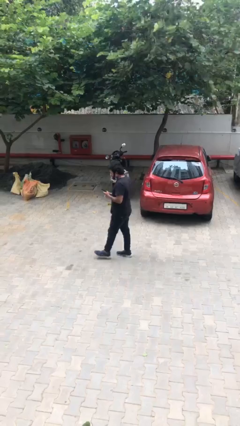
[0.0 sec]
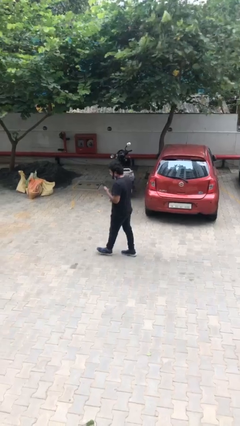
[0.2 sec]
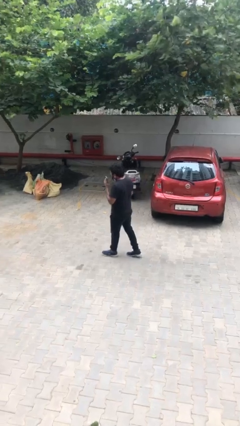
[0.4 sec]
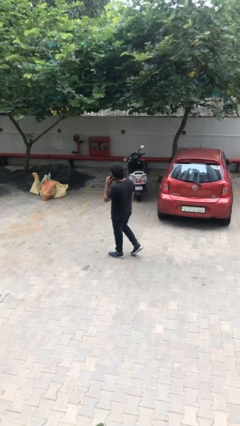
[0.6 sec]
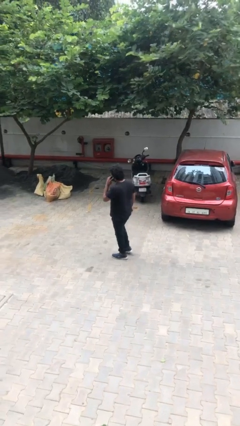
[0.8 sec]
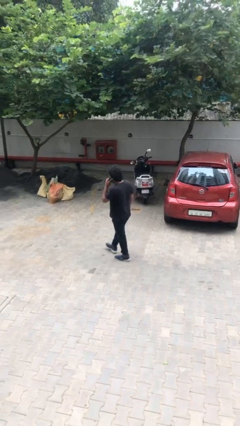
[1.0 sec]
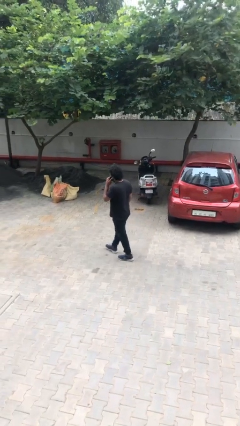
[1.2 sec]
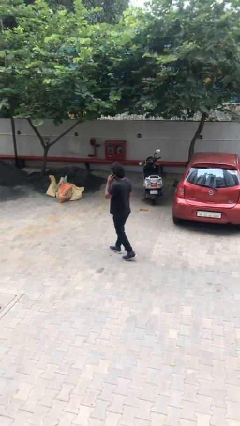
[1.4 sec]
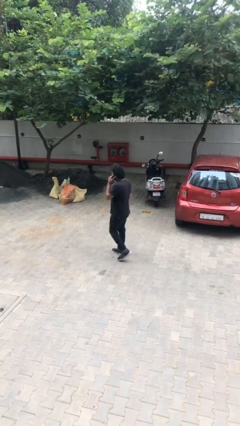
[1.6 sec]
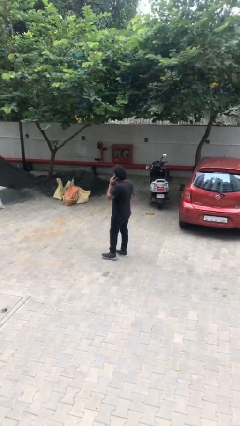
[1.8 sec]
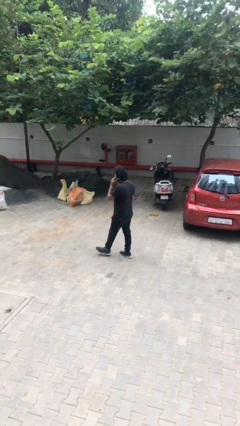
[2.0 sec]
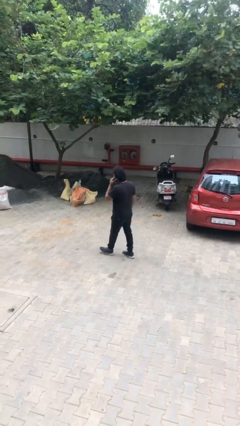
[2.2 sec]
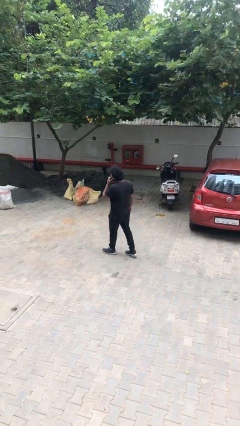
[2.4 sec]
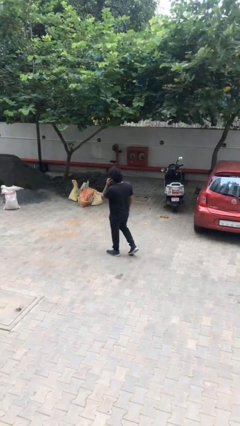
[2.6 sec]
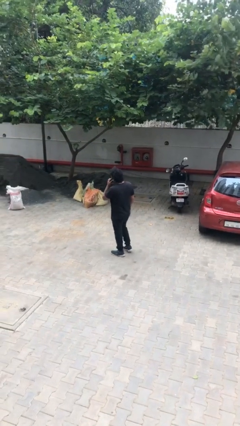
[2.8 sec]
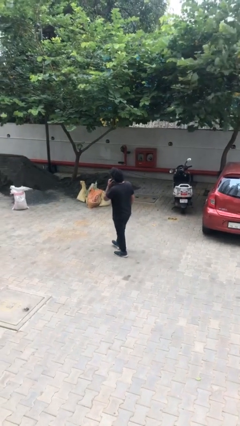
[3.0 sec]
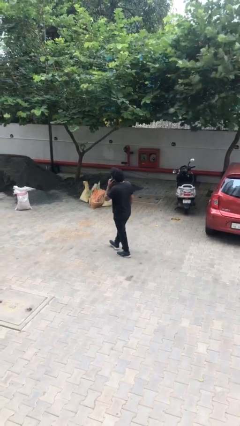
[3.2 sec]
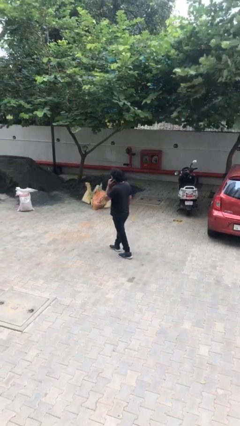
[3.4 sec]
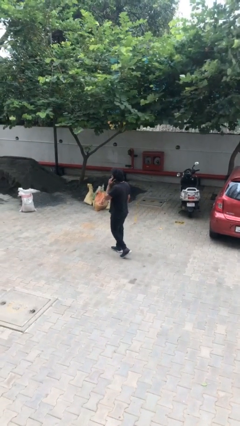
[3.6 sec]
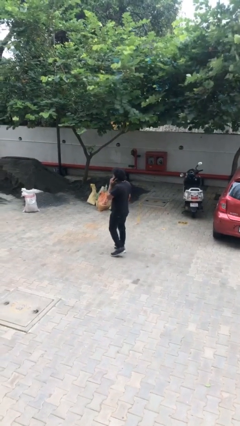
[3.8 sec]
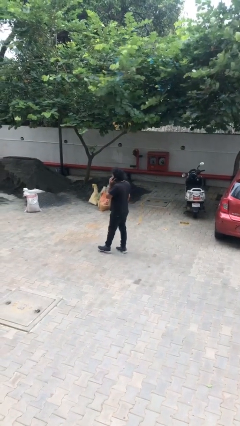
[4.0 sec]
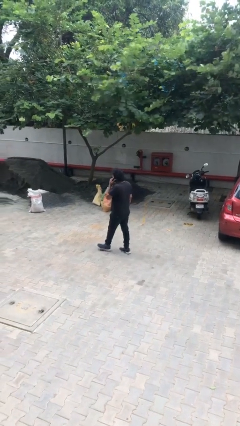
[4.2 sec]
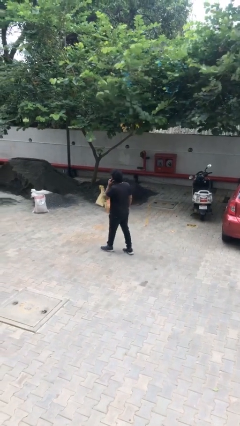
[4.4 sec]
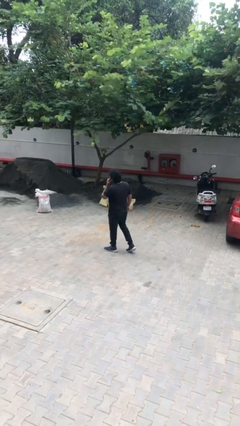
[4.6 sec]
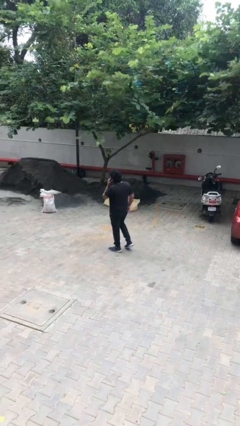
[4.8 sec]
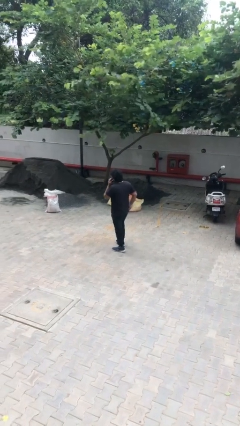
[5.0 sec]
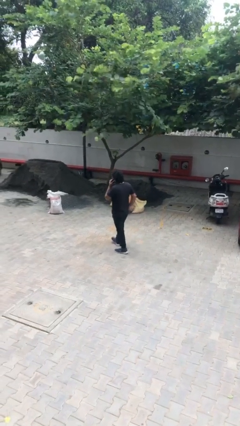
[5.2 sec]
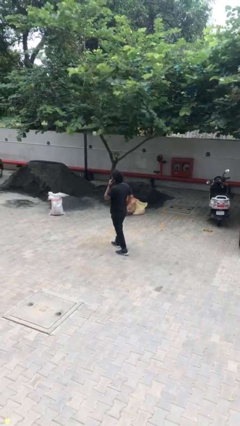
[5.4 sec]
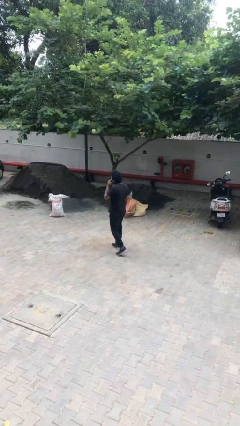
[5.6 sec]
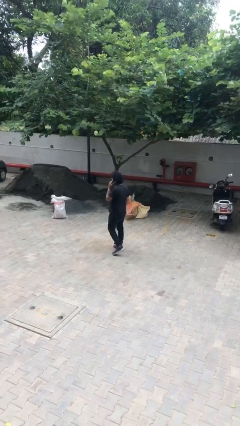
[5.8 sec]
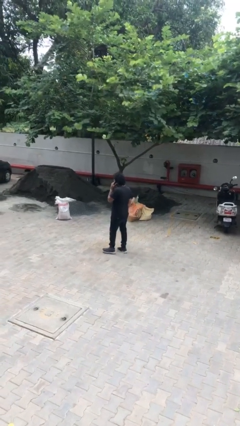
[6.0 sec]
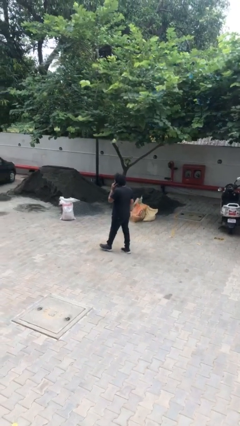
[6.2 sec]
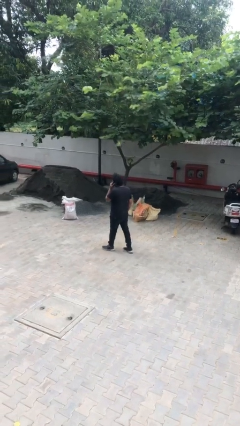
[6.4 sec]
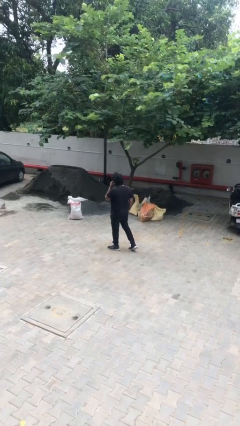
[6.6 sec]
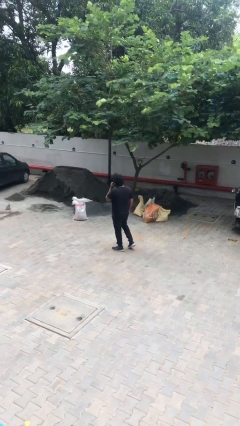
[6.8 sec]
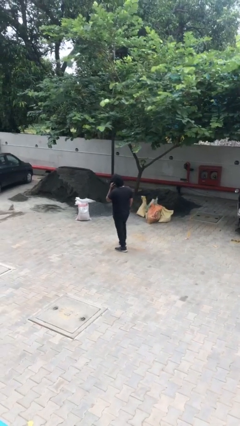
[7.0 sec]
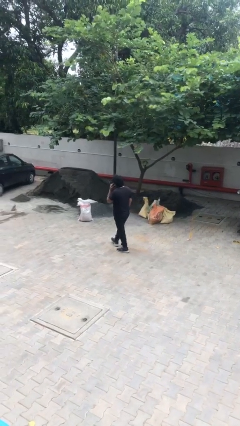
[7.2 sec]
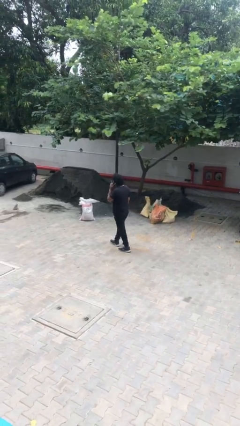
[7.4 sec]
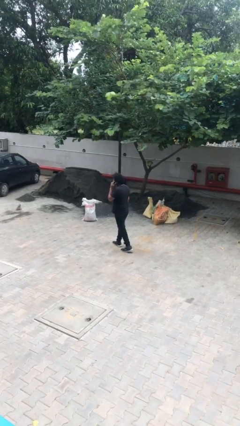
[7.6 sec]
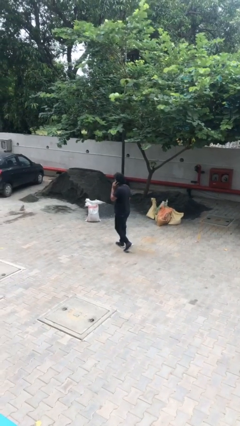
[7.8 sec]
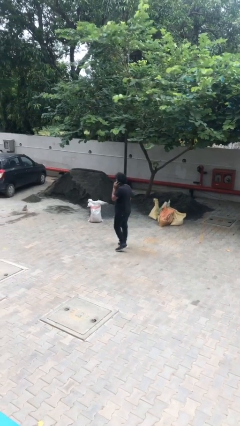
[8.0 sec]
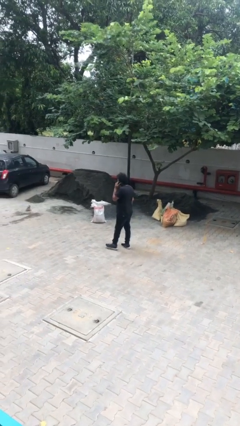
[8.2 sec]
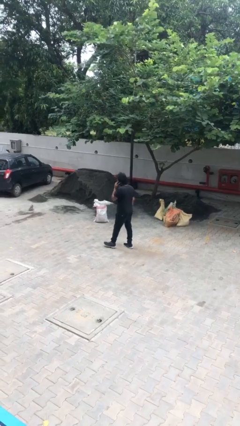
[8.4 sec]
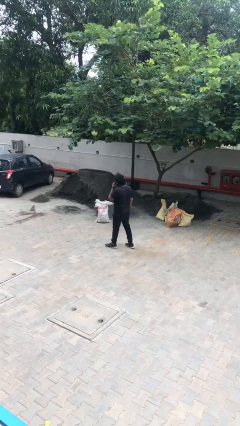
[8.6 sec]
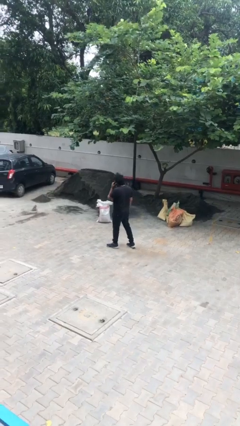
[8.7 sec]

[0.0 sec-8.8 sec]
person talks on phone

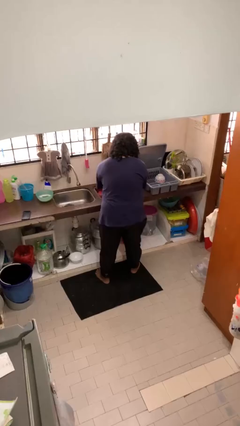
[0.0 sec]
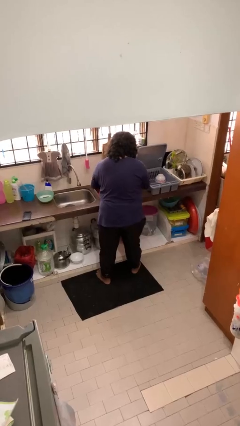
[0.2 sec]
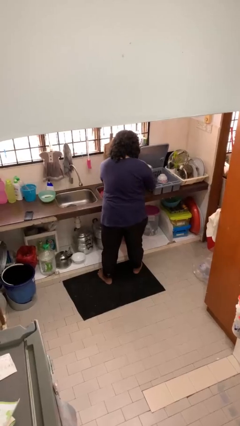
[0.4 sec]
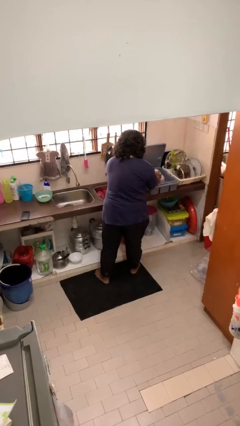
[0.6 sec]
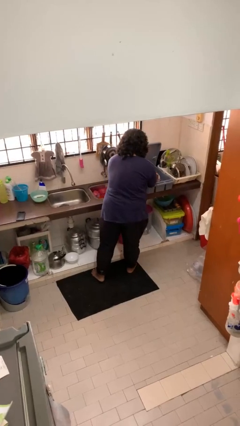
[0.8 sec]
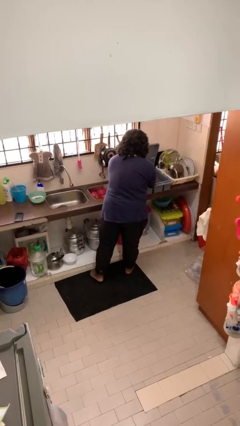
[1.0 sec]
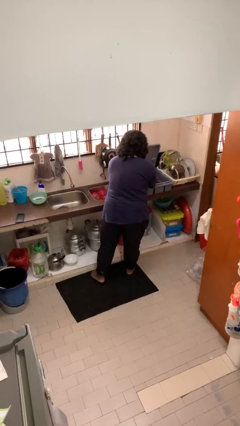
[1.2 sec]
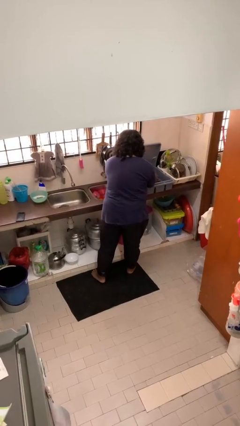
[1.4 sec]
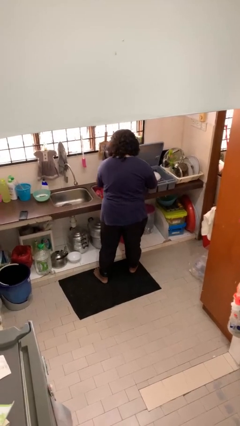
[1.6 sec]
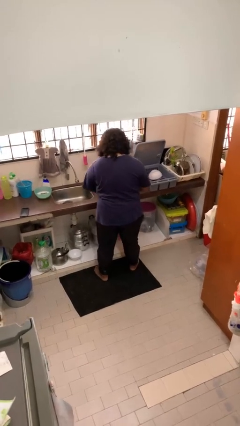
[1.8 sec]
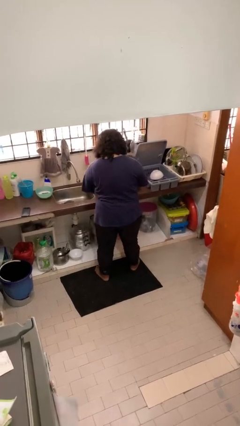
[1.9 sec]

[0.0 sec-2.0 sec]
person loads dishwasher

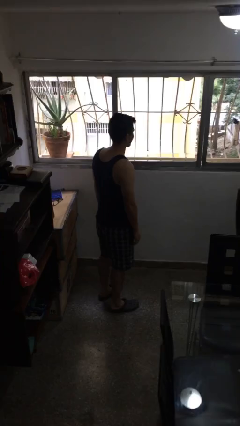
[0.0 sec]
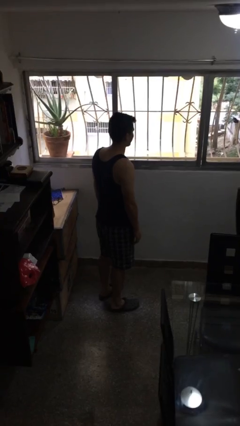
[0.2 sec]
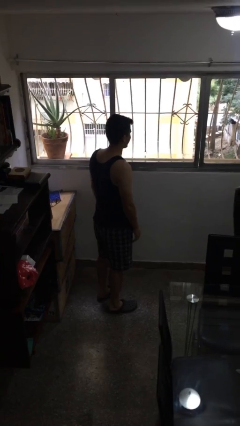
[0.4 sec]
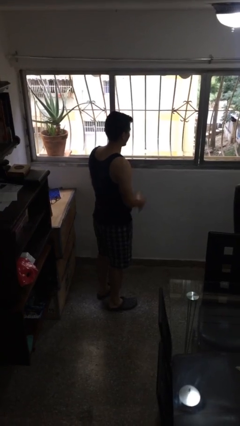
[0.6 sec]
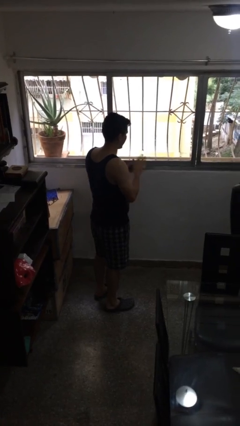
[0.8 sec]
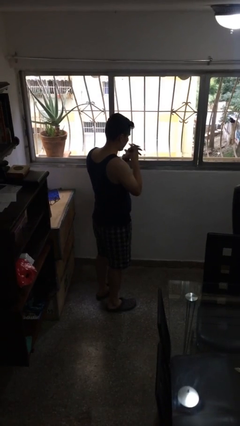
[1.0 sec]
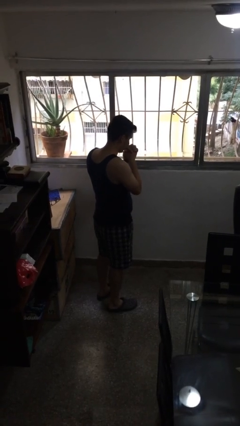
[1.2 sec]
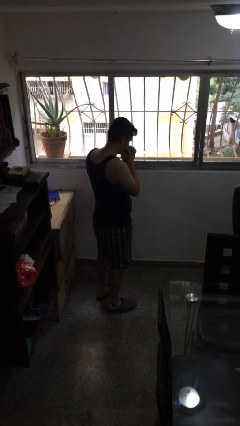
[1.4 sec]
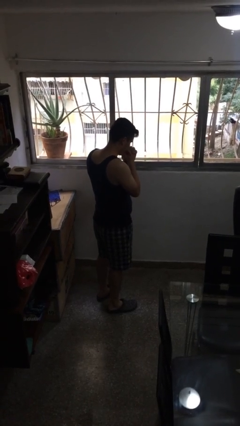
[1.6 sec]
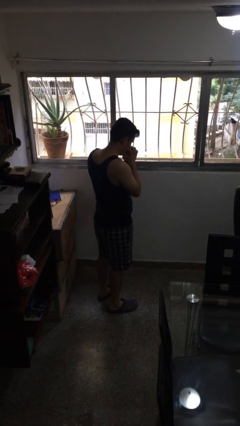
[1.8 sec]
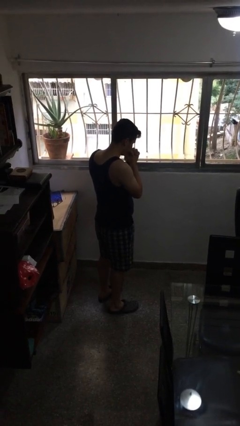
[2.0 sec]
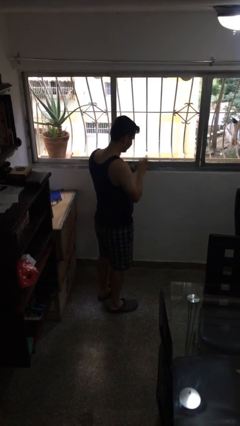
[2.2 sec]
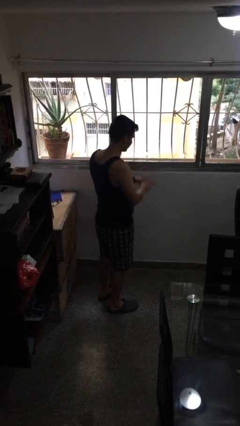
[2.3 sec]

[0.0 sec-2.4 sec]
person prays

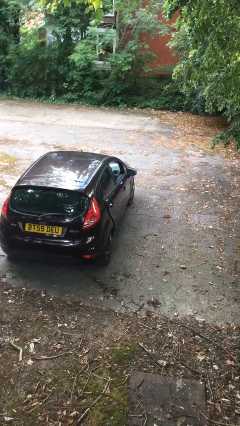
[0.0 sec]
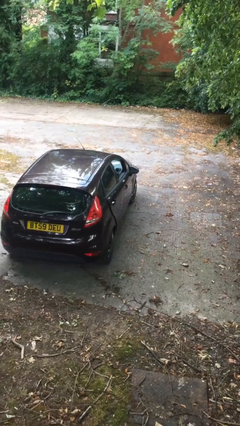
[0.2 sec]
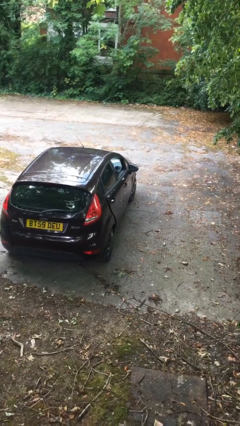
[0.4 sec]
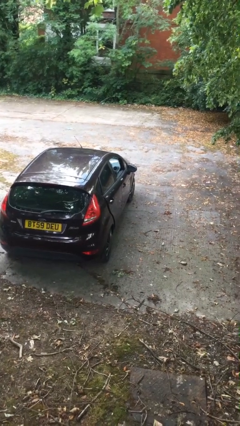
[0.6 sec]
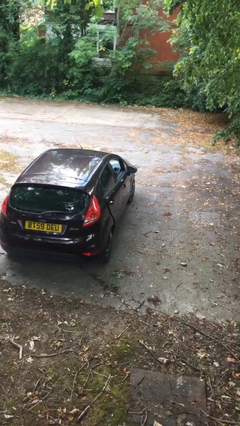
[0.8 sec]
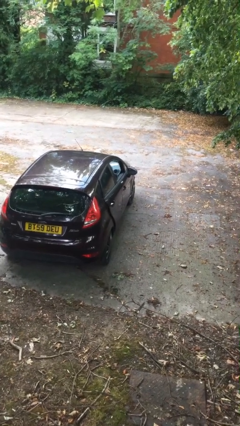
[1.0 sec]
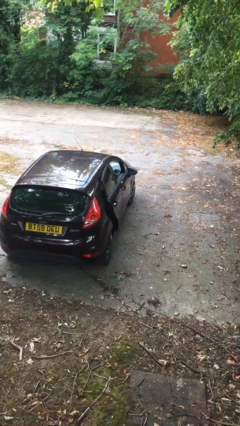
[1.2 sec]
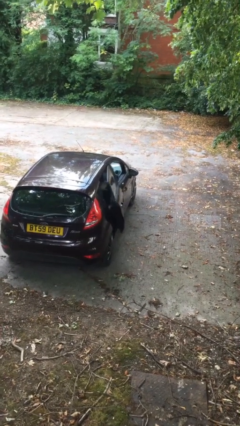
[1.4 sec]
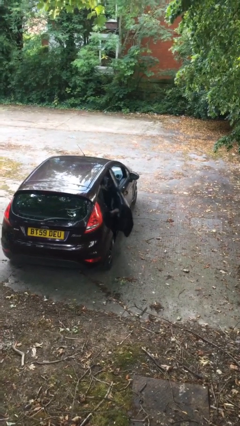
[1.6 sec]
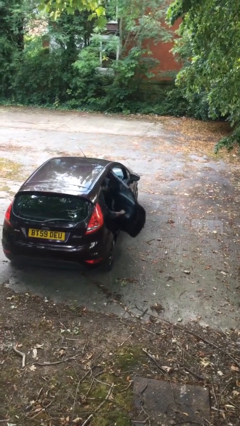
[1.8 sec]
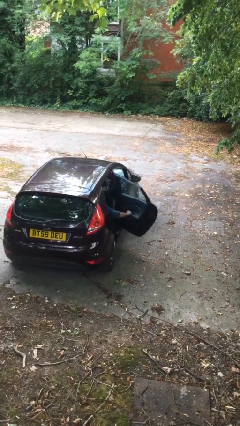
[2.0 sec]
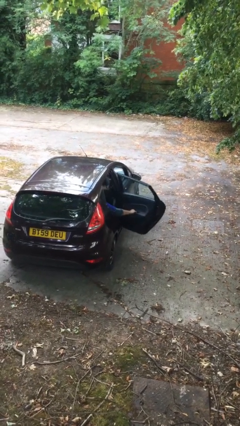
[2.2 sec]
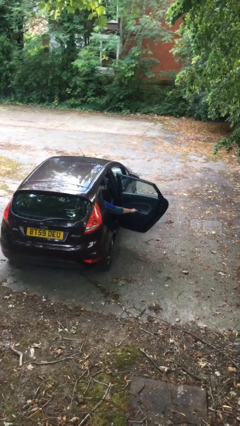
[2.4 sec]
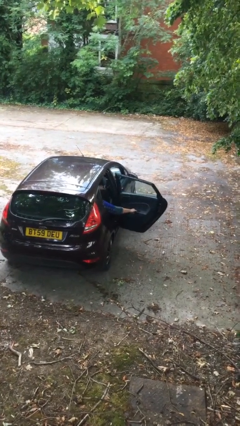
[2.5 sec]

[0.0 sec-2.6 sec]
person opens car door

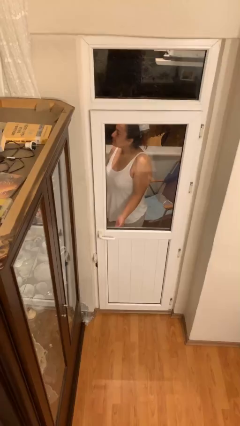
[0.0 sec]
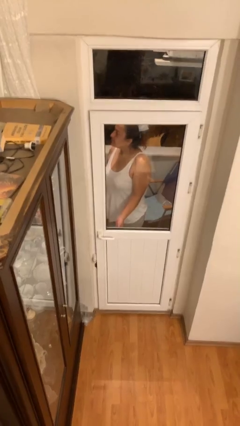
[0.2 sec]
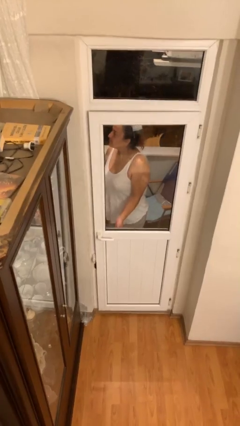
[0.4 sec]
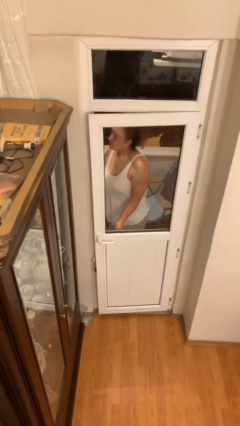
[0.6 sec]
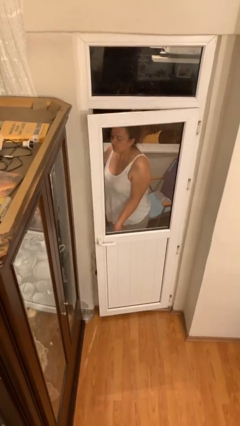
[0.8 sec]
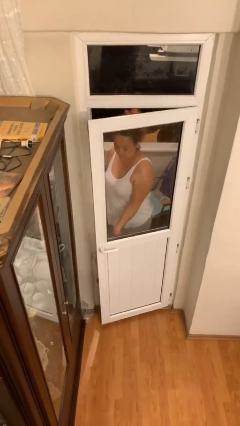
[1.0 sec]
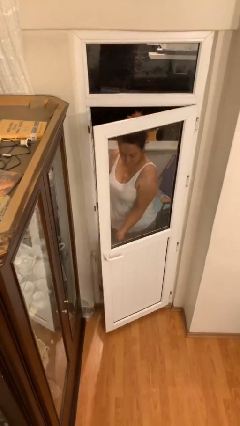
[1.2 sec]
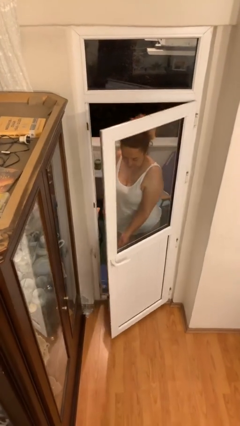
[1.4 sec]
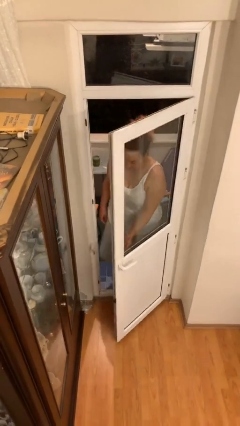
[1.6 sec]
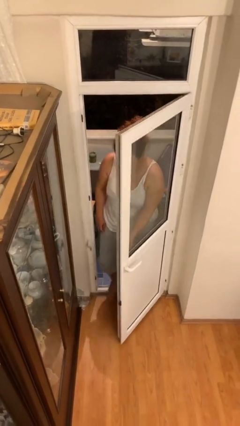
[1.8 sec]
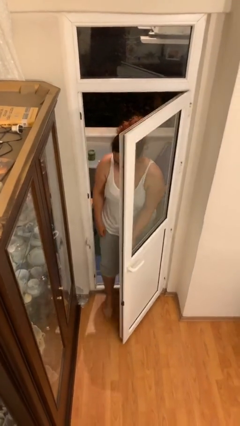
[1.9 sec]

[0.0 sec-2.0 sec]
person opens facility door
